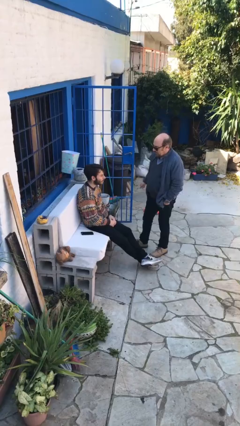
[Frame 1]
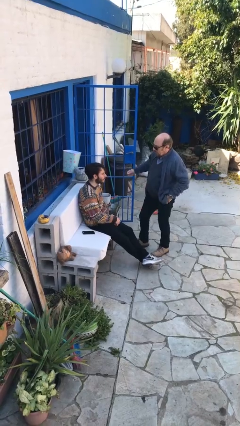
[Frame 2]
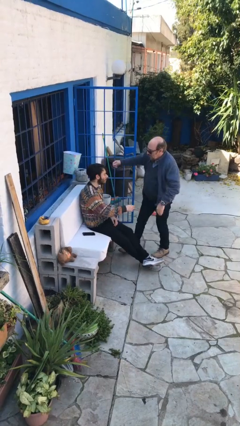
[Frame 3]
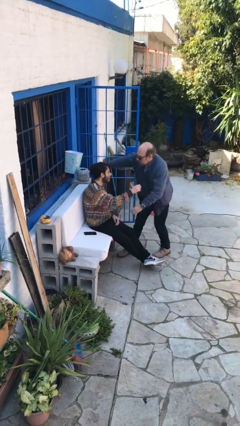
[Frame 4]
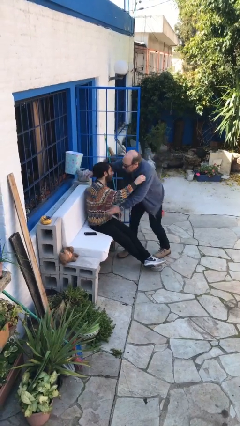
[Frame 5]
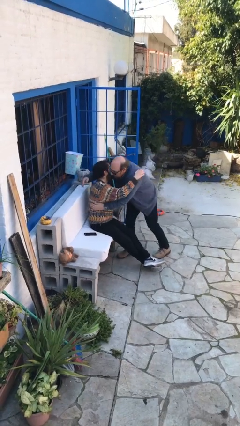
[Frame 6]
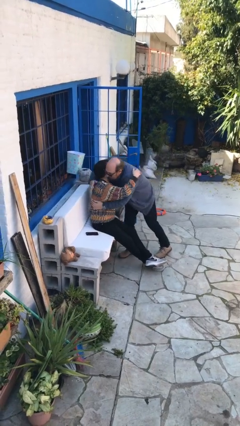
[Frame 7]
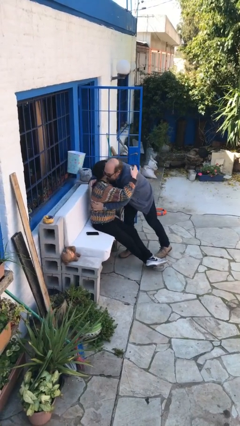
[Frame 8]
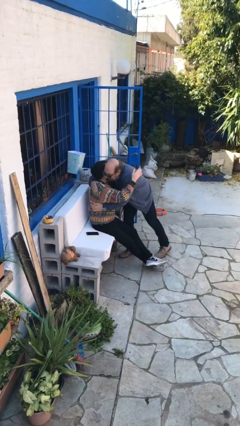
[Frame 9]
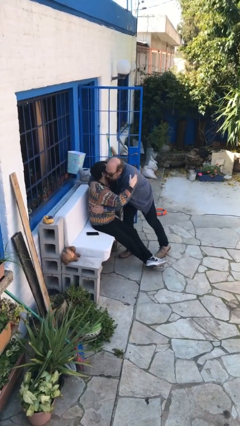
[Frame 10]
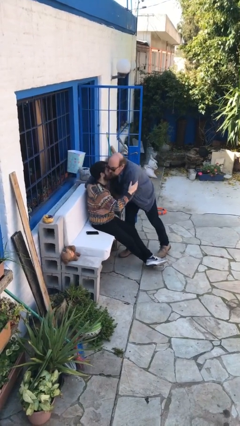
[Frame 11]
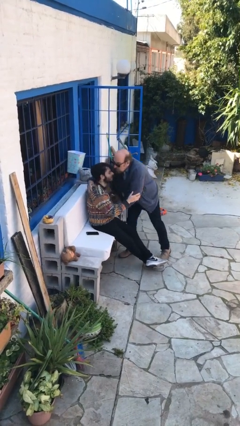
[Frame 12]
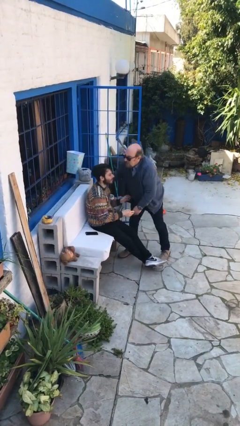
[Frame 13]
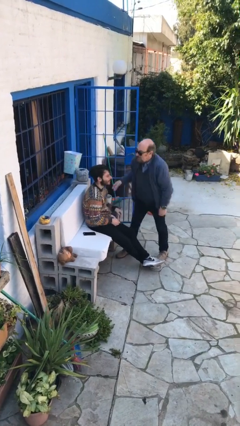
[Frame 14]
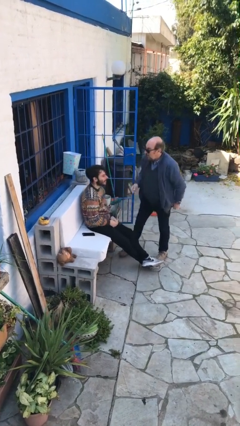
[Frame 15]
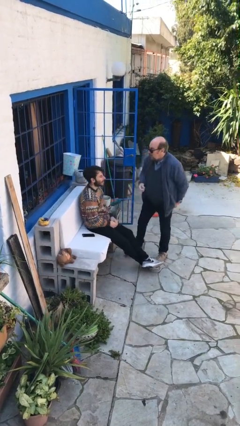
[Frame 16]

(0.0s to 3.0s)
person embraces person

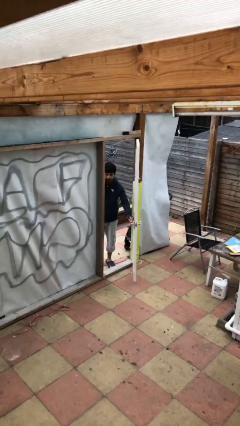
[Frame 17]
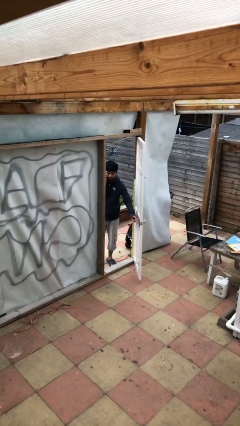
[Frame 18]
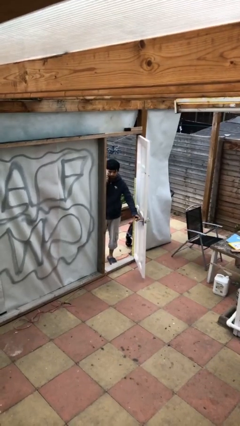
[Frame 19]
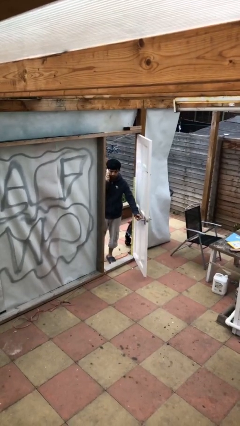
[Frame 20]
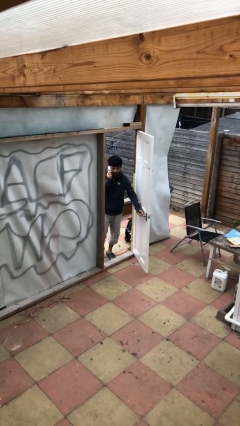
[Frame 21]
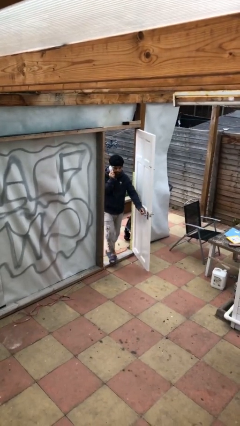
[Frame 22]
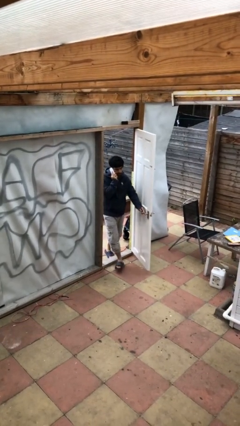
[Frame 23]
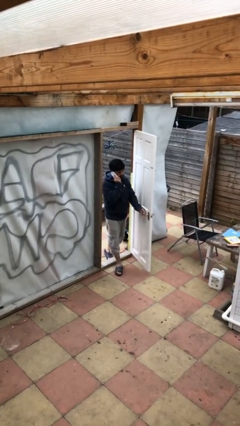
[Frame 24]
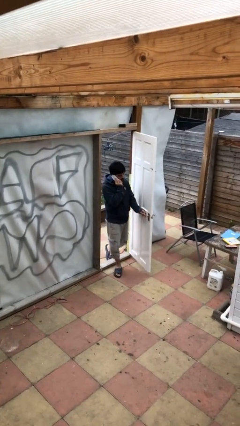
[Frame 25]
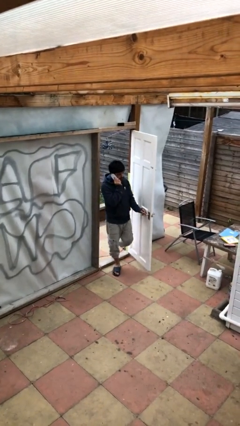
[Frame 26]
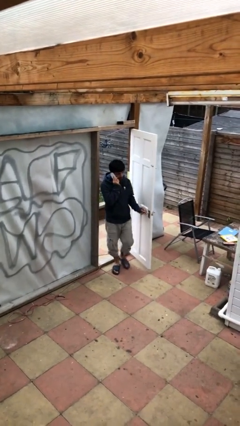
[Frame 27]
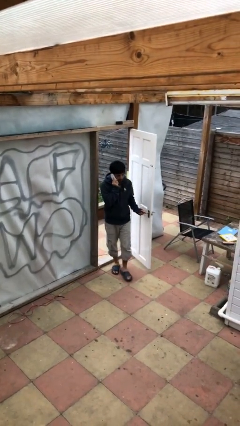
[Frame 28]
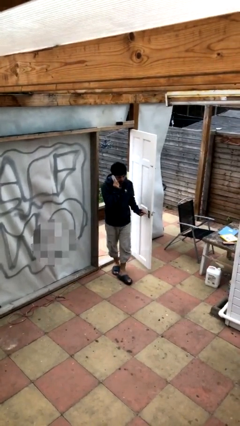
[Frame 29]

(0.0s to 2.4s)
person enters scene through structure

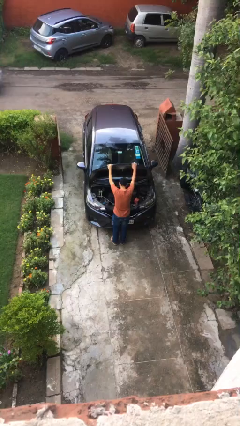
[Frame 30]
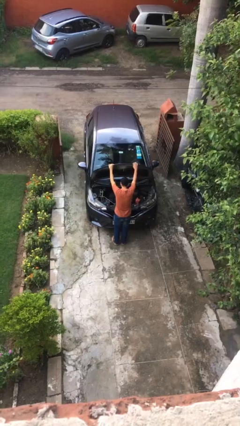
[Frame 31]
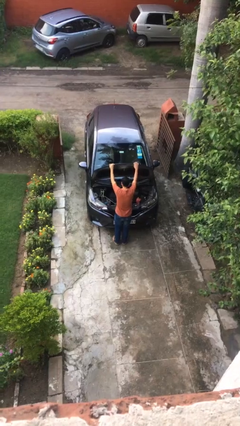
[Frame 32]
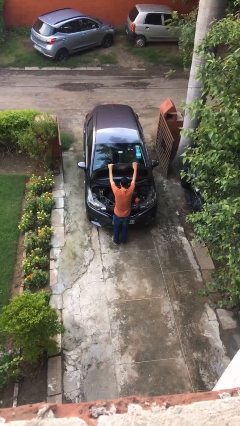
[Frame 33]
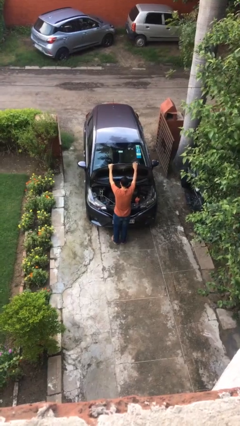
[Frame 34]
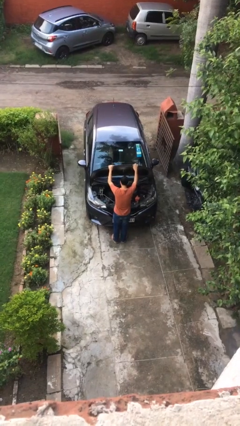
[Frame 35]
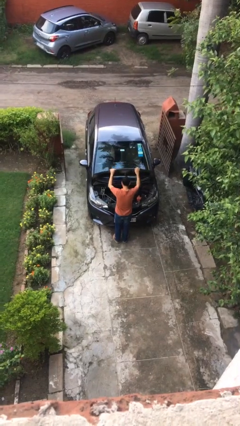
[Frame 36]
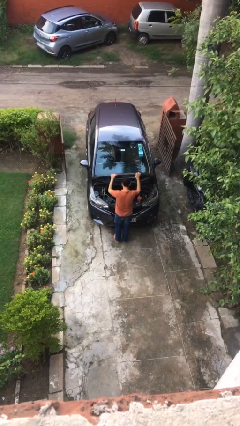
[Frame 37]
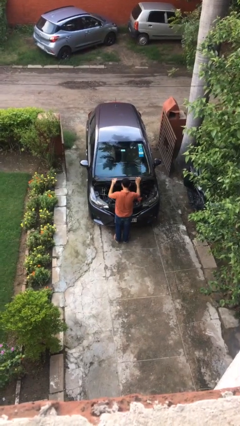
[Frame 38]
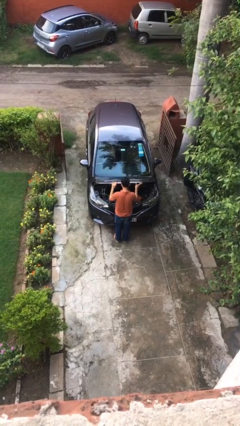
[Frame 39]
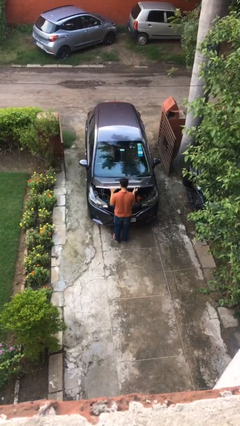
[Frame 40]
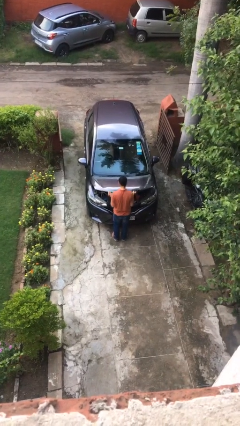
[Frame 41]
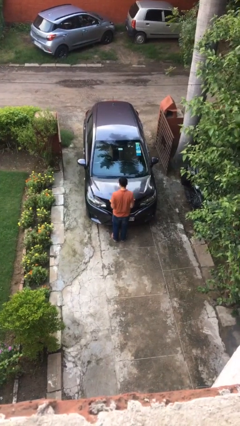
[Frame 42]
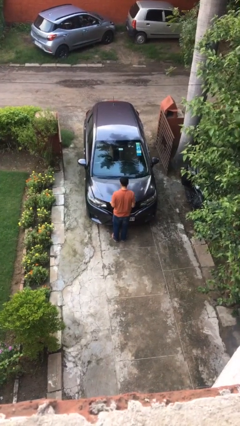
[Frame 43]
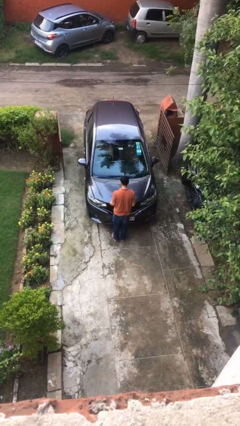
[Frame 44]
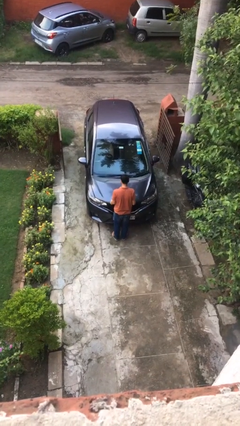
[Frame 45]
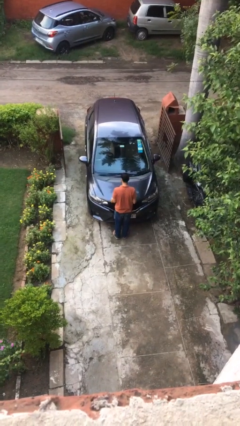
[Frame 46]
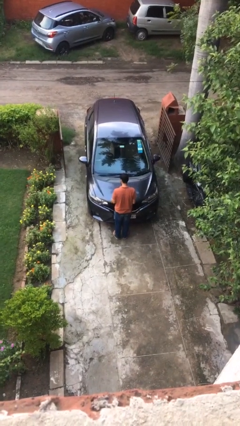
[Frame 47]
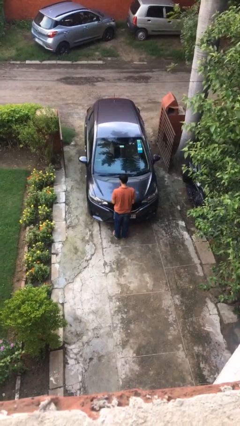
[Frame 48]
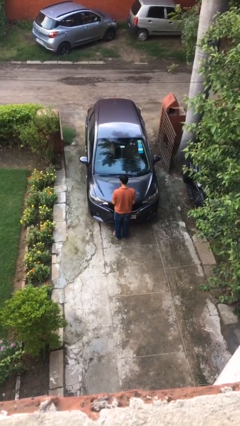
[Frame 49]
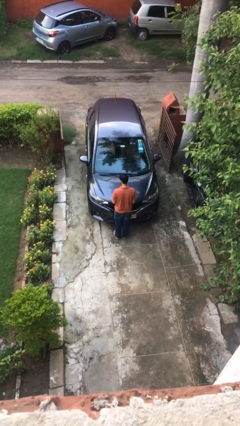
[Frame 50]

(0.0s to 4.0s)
person closes car hood

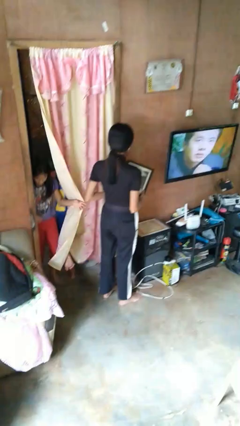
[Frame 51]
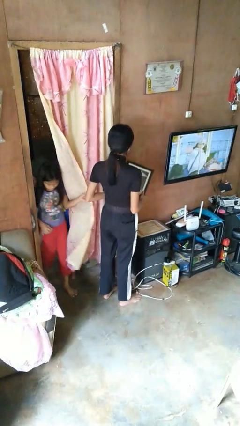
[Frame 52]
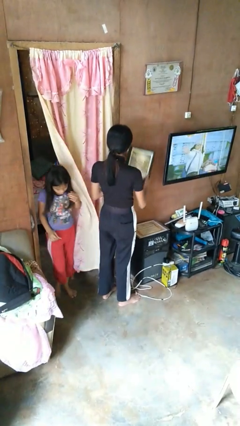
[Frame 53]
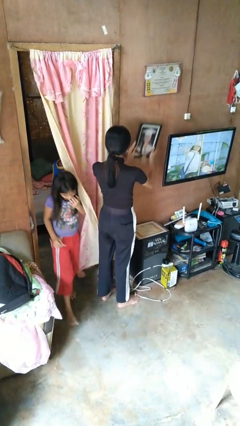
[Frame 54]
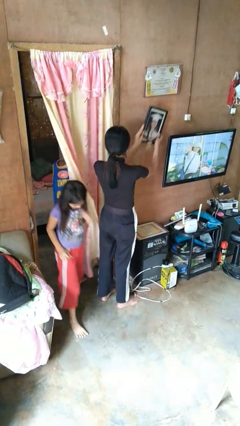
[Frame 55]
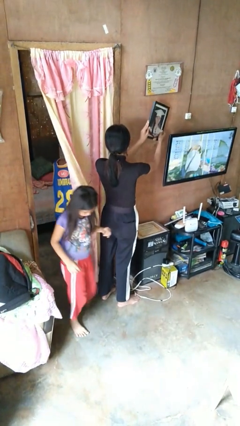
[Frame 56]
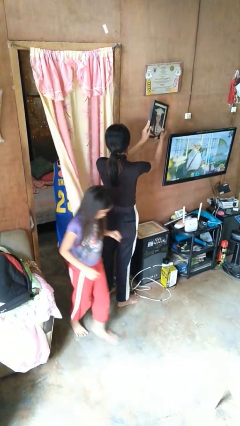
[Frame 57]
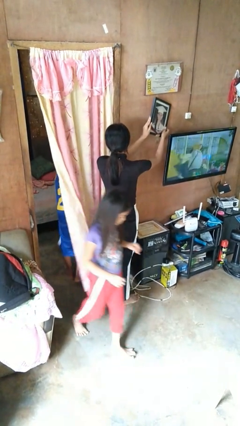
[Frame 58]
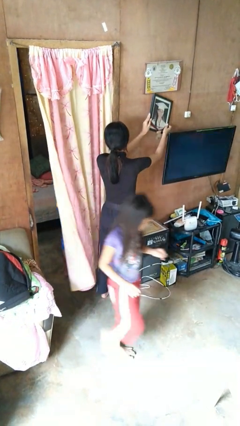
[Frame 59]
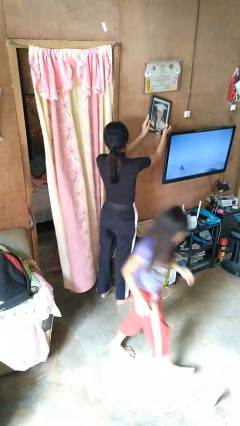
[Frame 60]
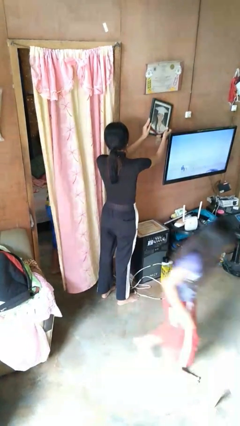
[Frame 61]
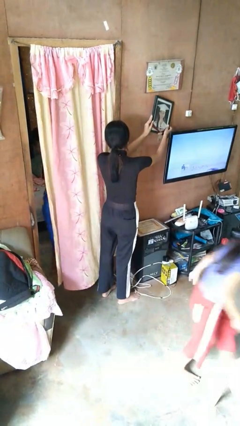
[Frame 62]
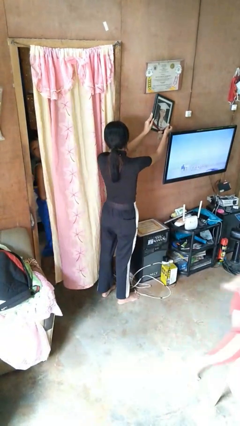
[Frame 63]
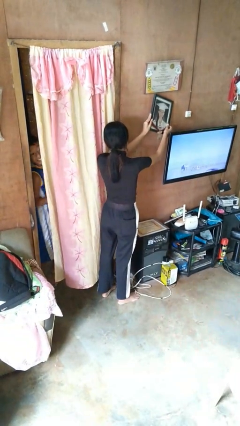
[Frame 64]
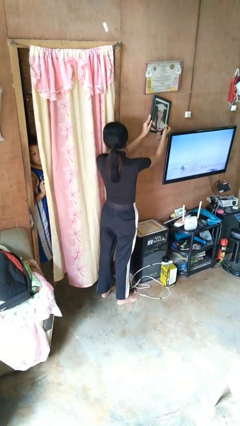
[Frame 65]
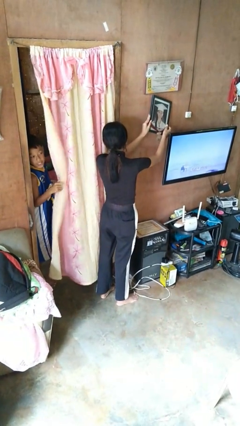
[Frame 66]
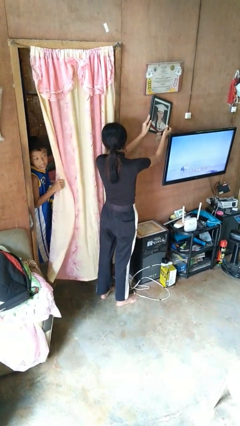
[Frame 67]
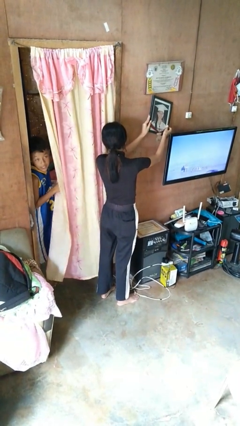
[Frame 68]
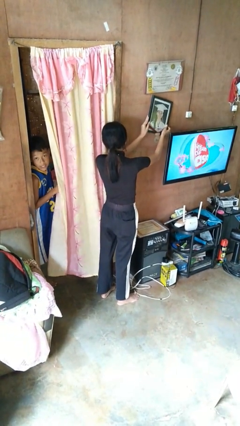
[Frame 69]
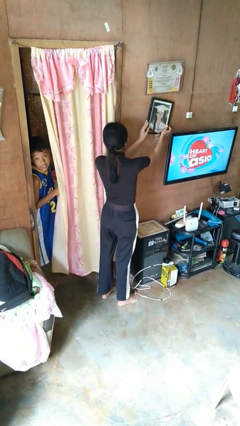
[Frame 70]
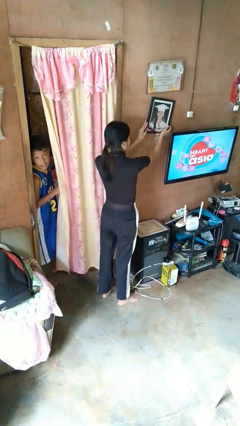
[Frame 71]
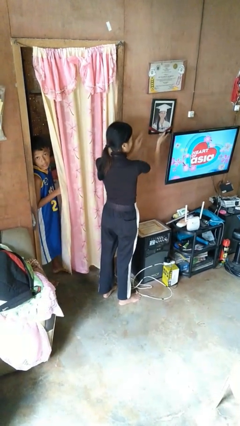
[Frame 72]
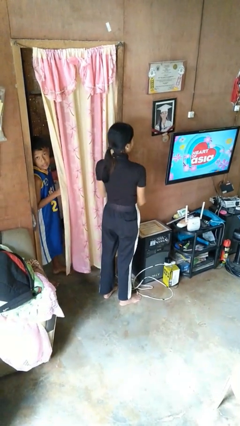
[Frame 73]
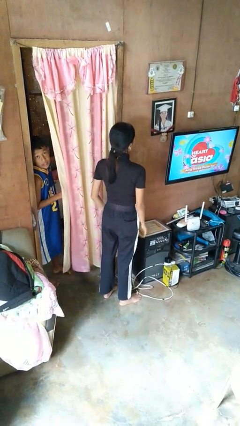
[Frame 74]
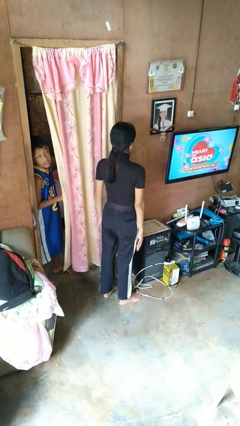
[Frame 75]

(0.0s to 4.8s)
person puts up picture frame

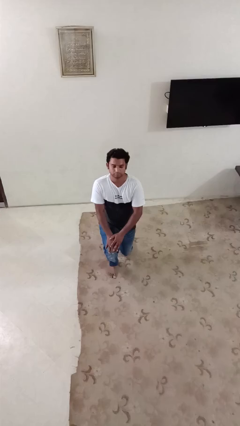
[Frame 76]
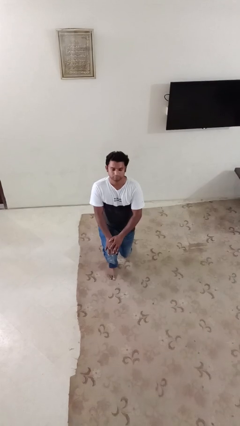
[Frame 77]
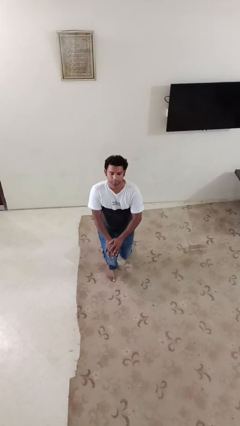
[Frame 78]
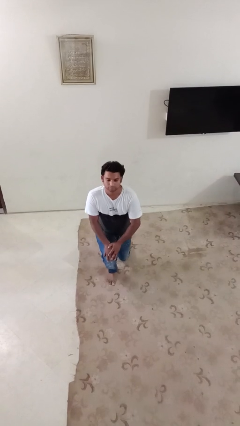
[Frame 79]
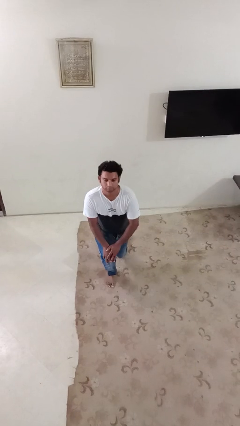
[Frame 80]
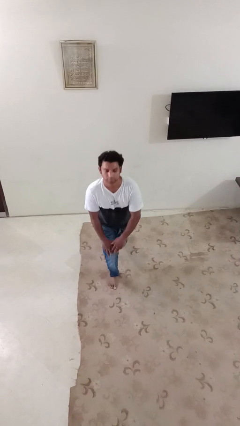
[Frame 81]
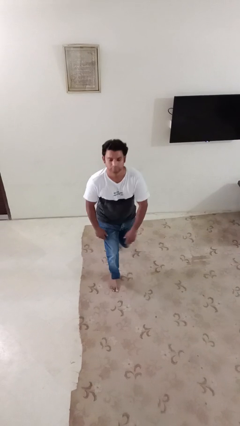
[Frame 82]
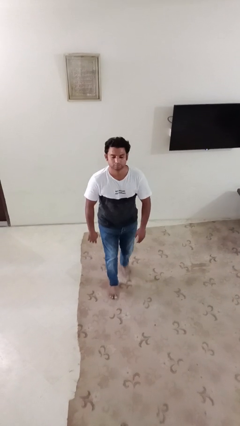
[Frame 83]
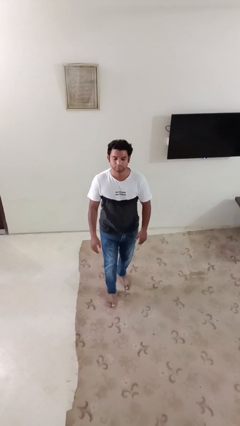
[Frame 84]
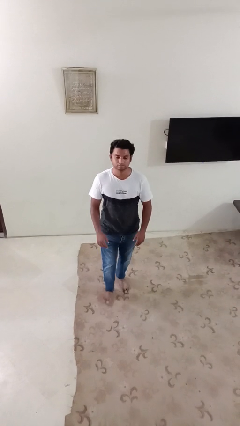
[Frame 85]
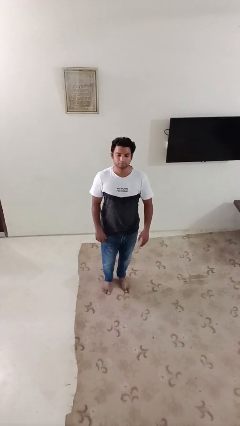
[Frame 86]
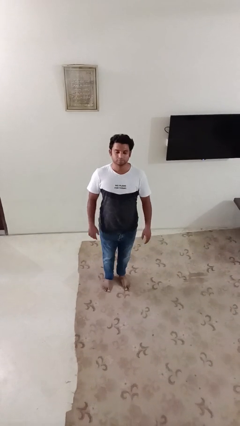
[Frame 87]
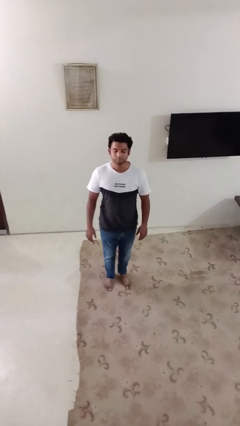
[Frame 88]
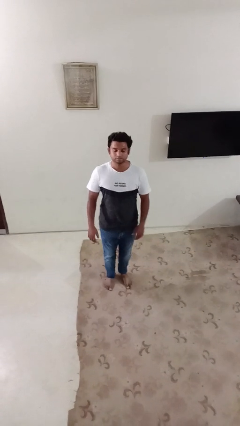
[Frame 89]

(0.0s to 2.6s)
person stands up from floor

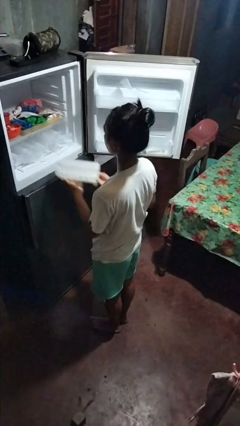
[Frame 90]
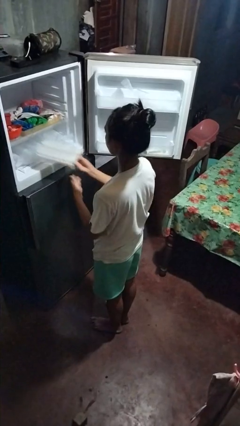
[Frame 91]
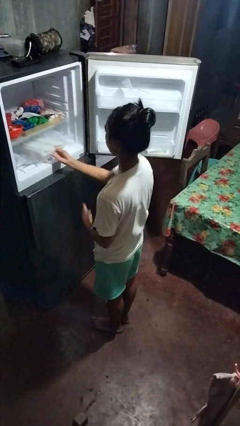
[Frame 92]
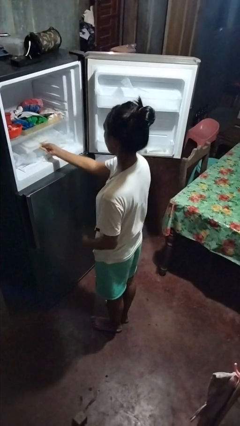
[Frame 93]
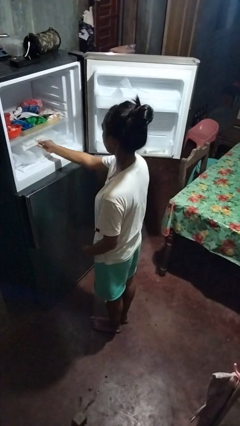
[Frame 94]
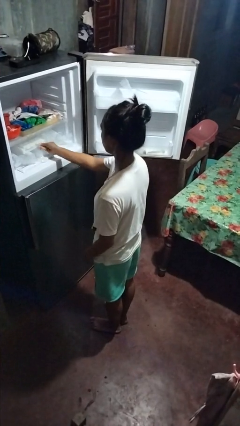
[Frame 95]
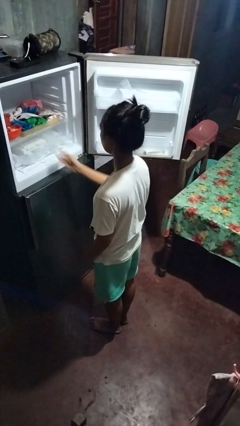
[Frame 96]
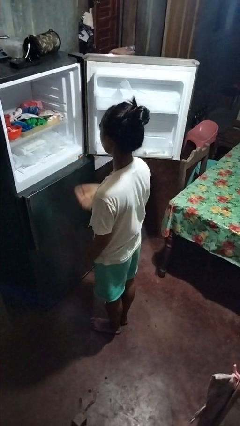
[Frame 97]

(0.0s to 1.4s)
person puts object into refrigerator
